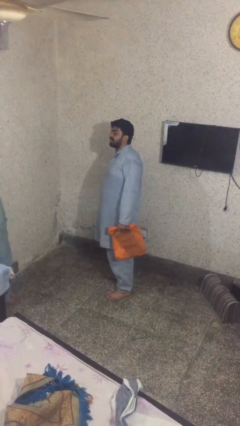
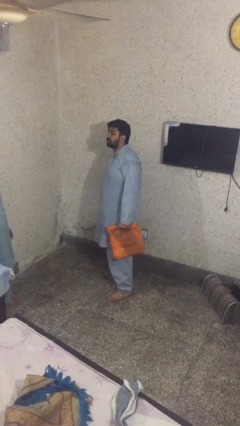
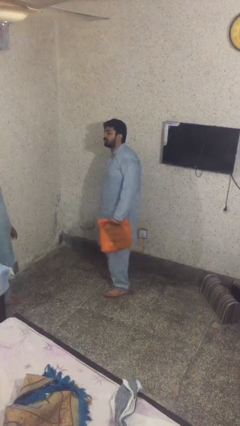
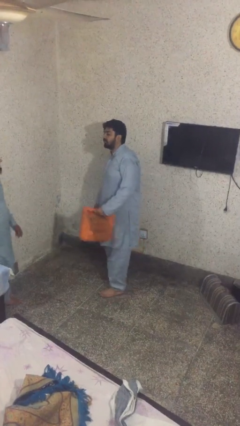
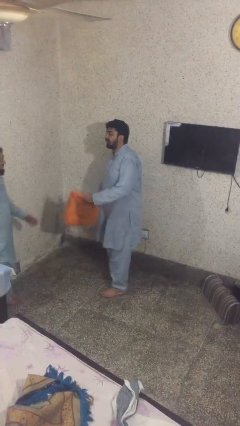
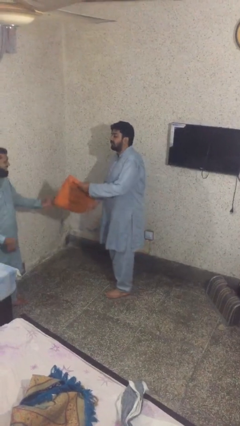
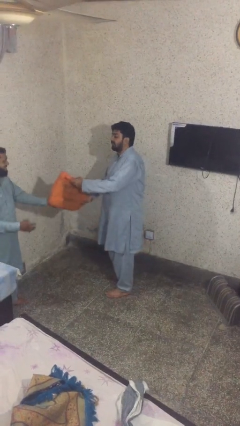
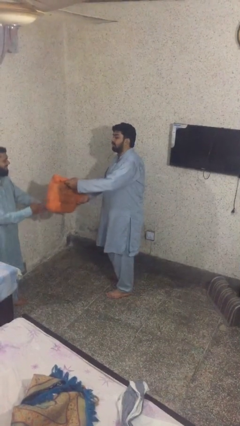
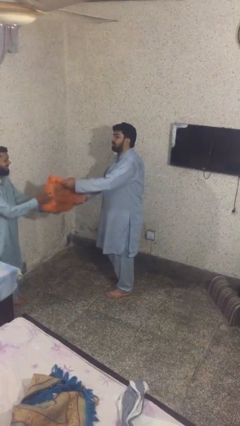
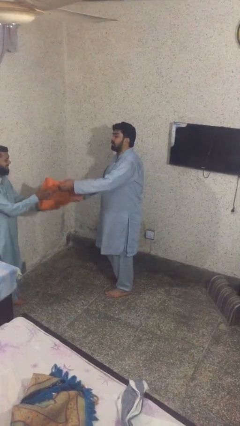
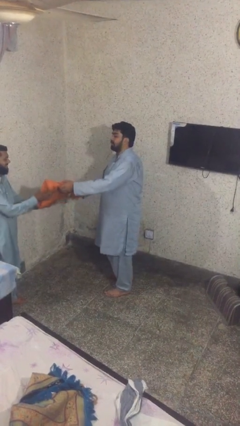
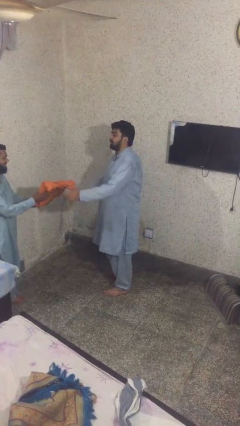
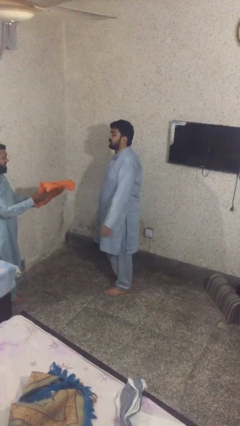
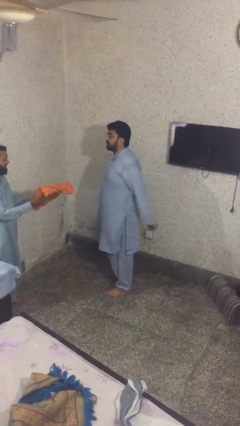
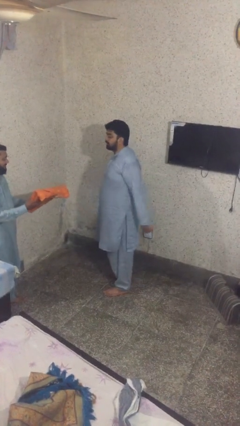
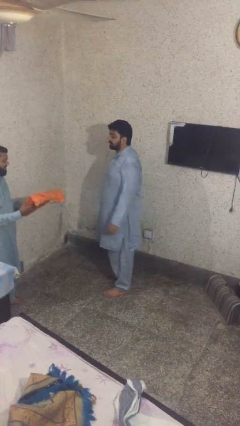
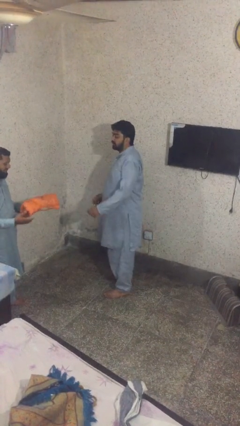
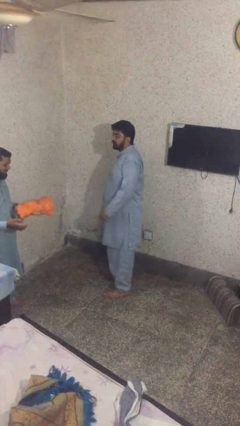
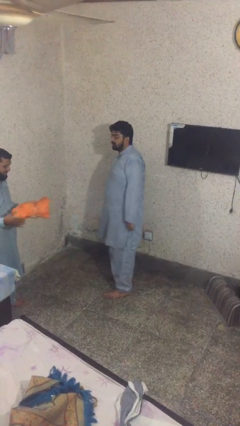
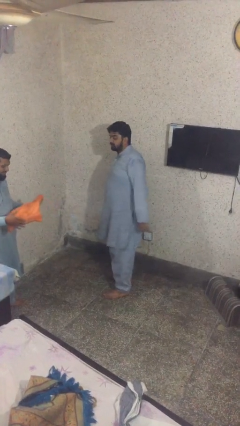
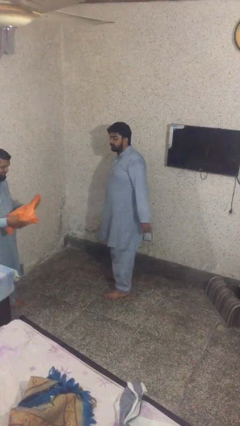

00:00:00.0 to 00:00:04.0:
person transfers object to person

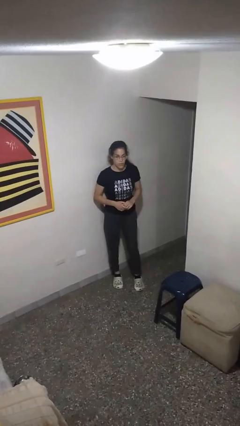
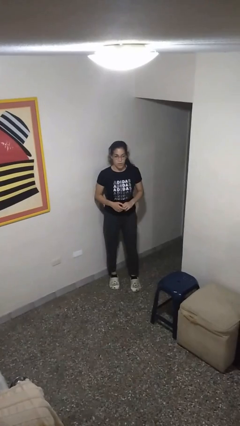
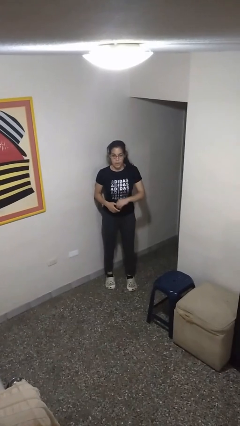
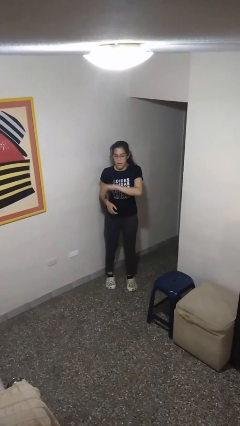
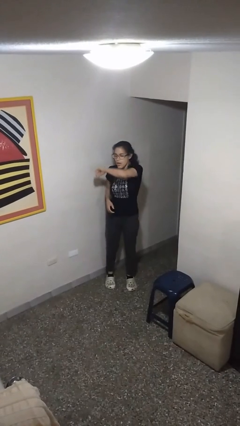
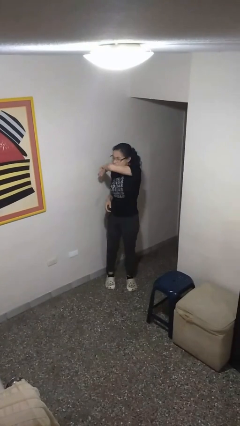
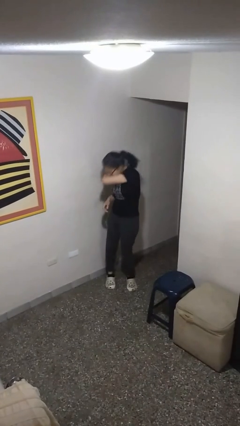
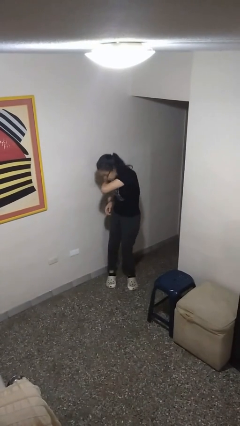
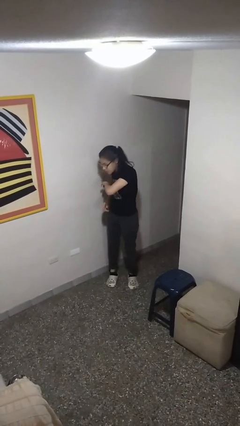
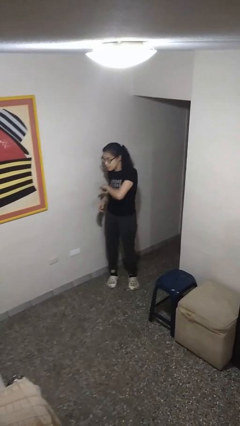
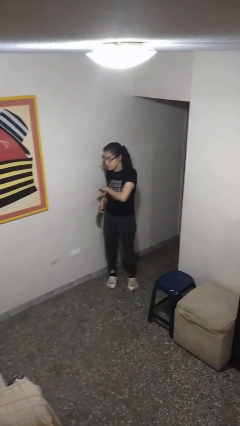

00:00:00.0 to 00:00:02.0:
person sneezes into arm

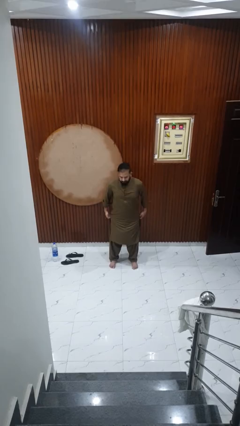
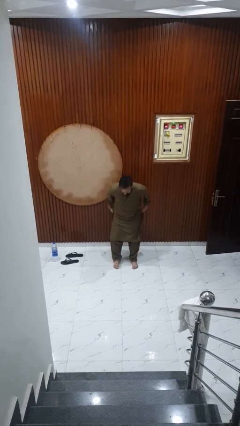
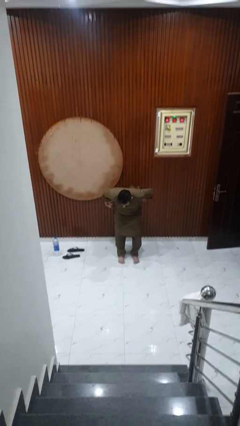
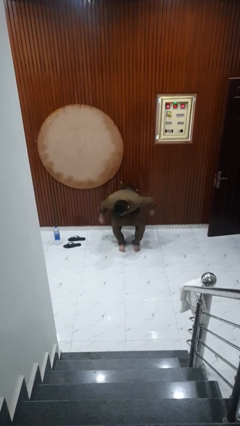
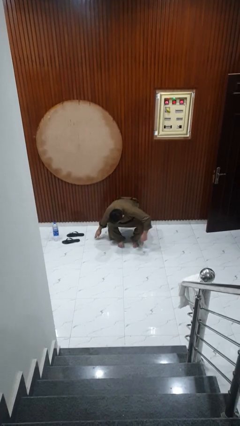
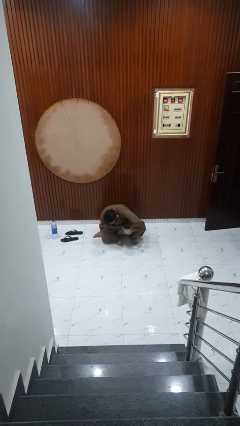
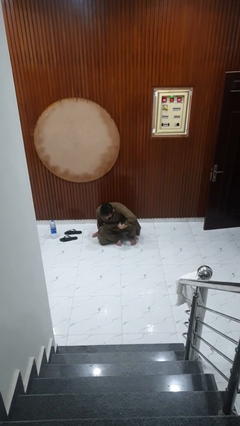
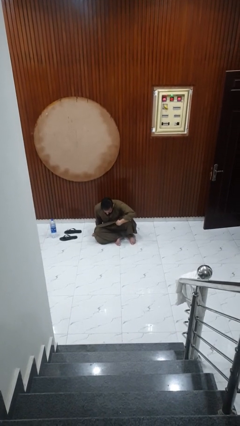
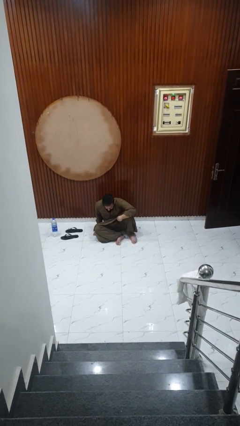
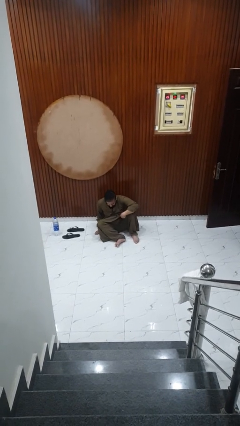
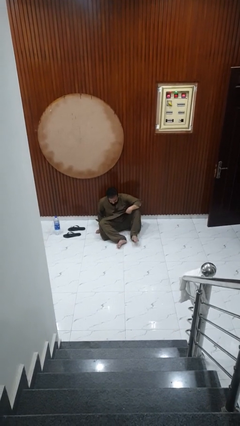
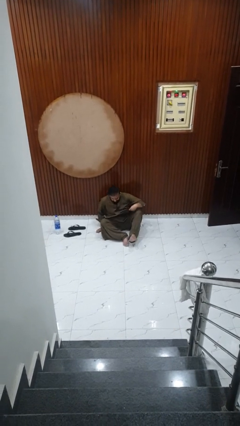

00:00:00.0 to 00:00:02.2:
person sits crisscross

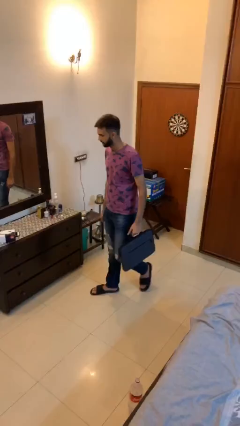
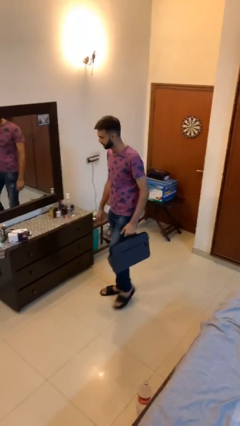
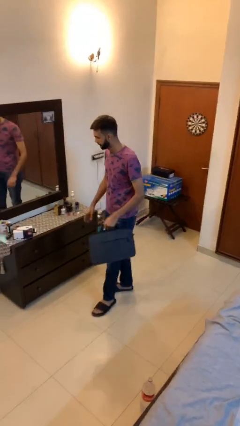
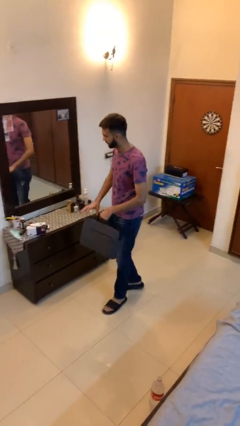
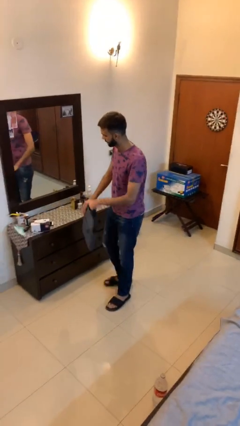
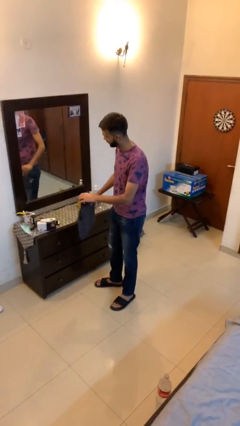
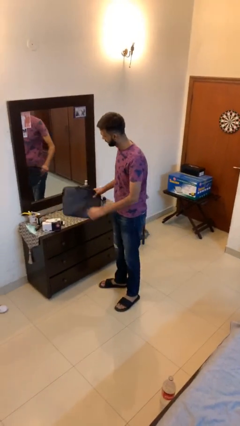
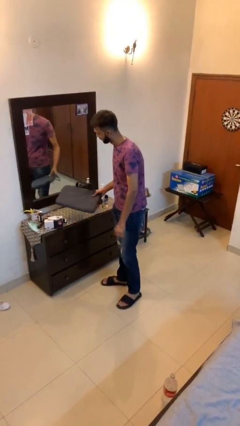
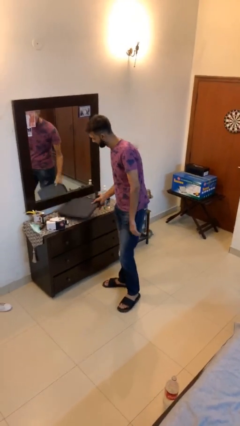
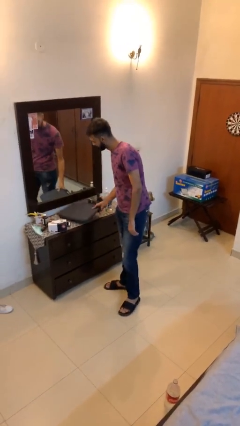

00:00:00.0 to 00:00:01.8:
person puts down object on table

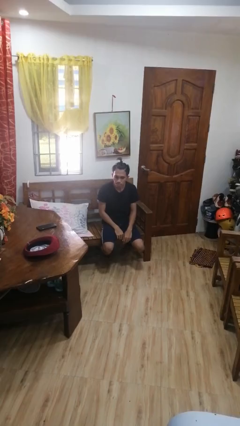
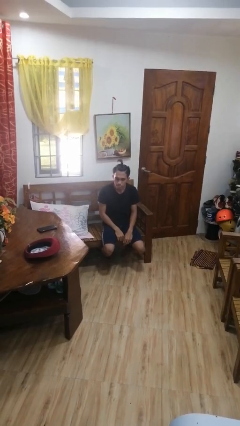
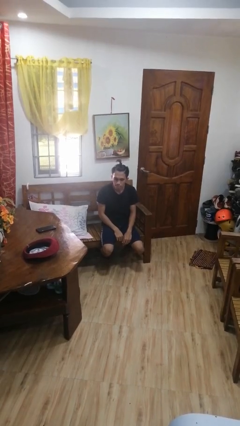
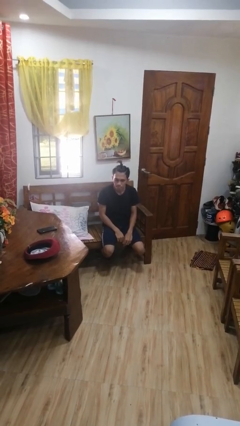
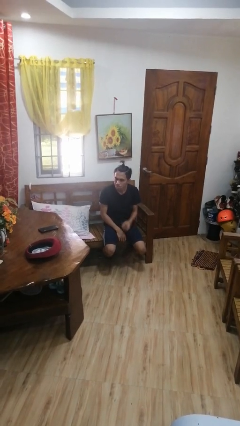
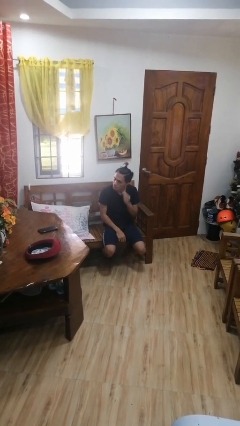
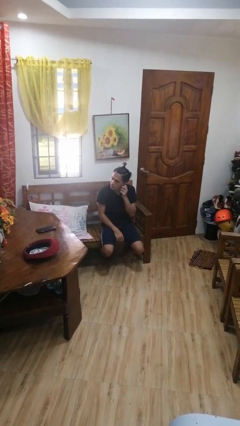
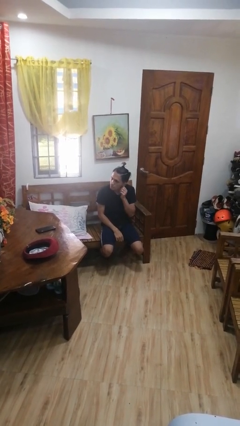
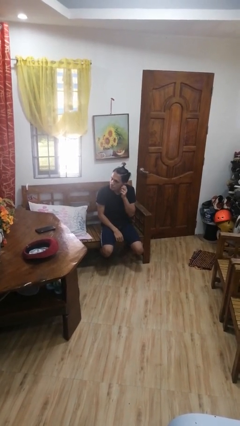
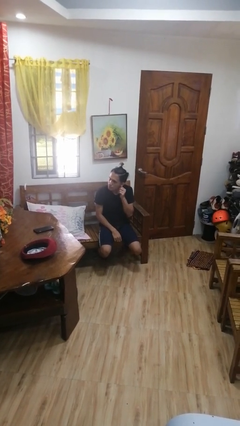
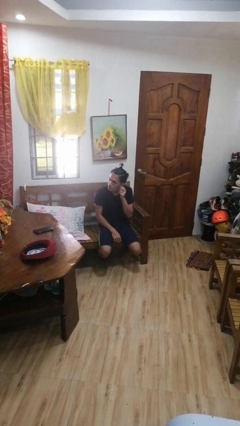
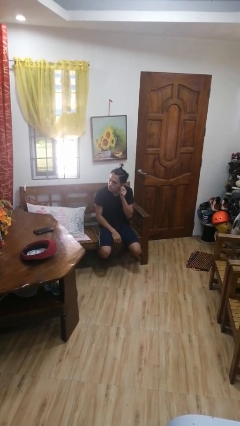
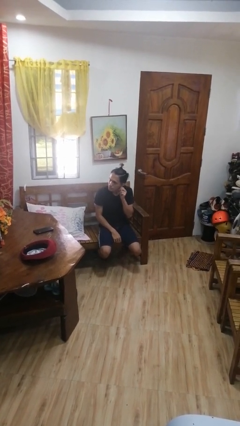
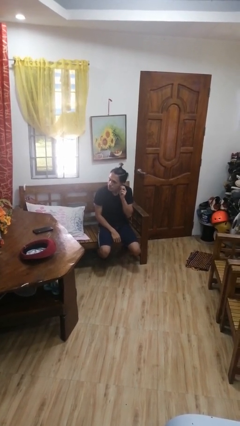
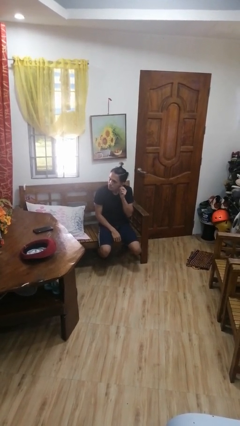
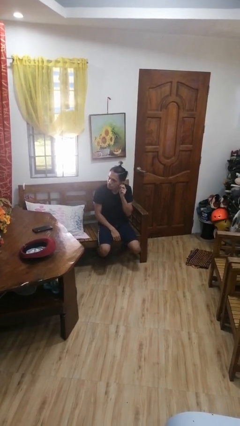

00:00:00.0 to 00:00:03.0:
person touches earlobe

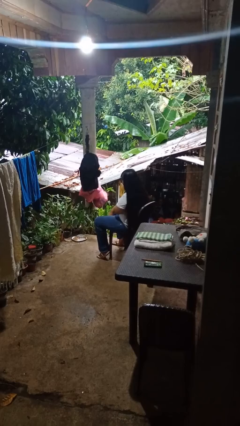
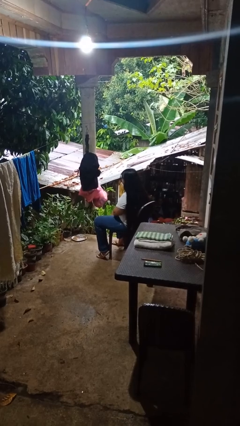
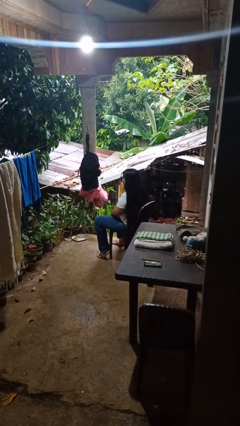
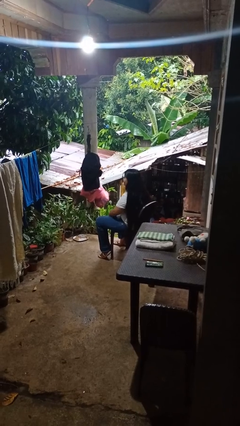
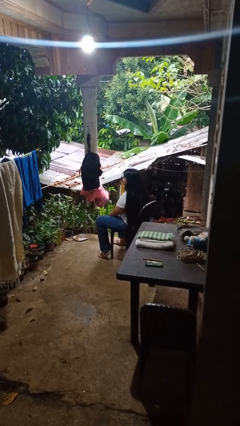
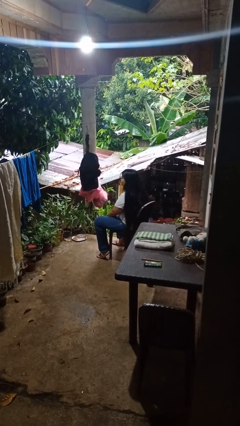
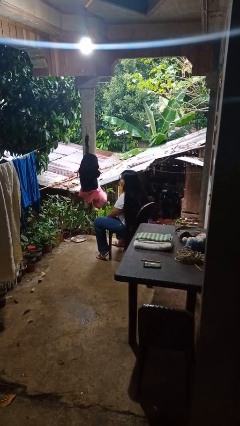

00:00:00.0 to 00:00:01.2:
person swats bug

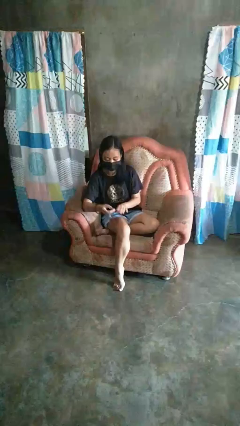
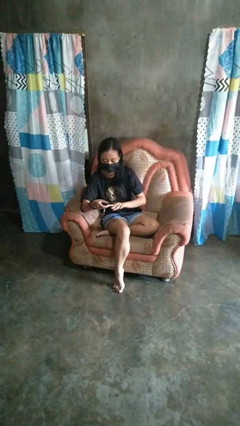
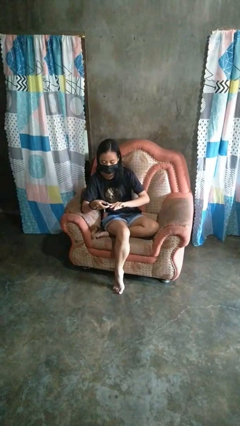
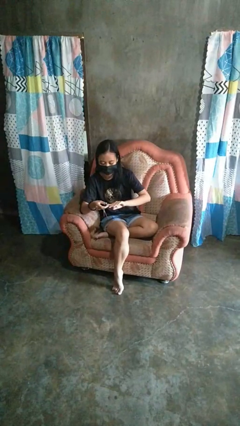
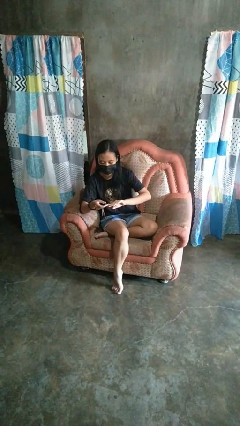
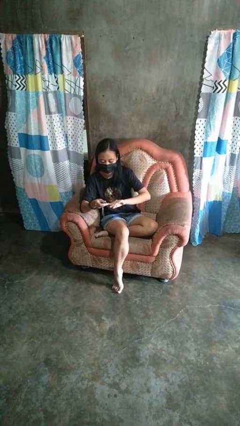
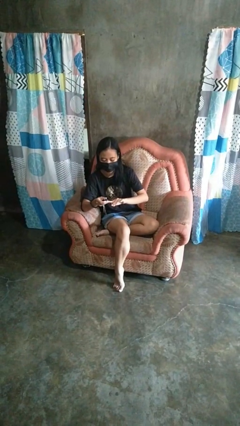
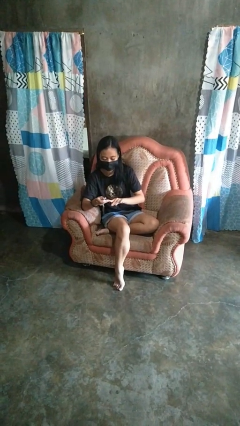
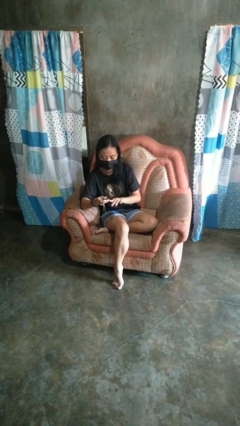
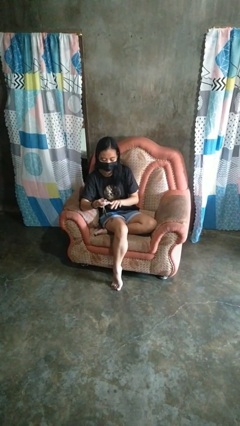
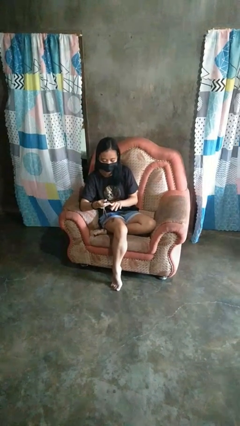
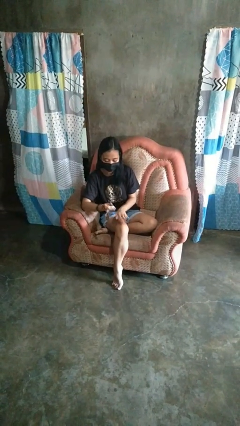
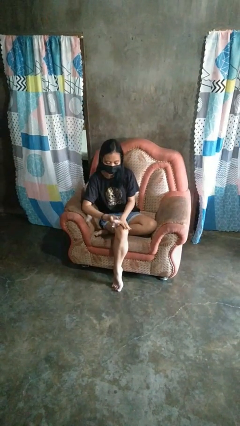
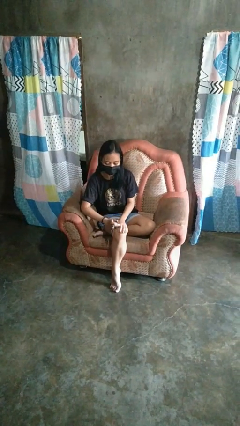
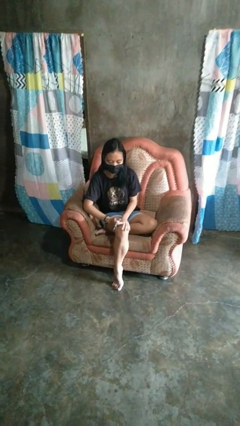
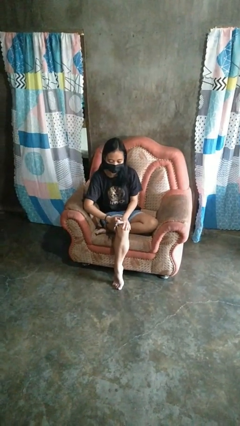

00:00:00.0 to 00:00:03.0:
person clips fingernails
